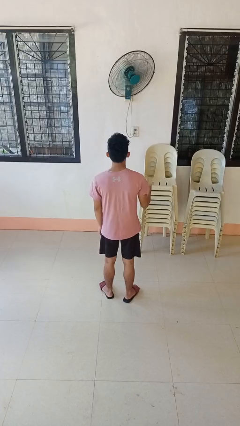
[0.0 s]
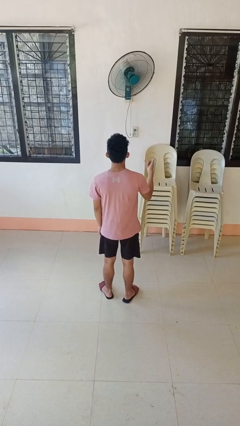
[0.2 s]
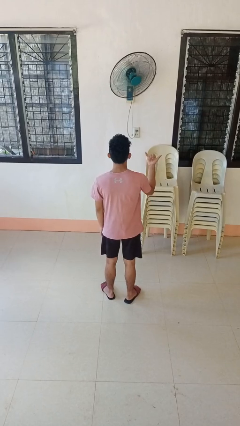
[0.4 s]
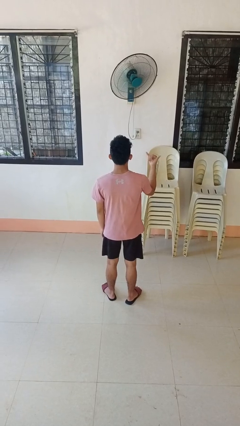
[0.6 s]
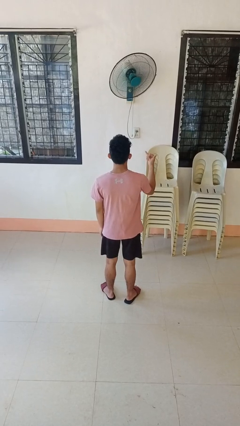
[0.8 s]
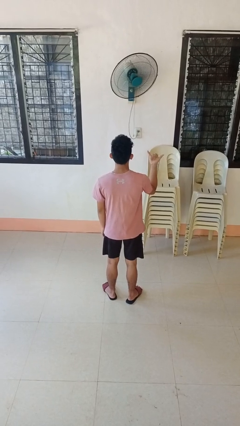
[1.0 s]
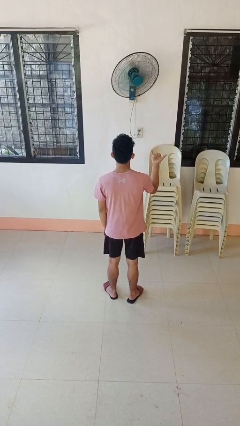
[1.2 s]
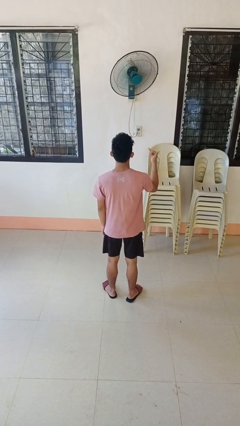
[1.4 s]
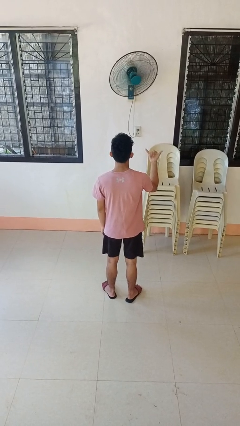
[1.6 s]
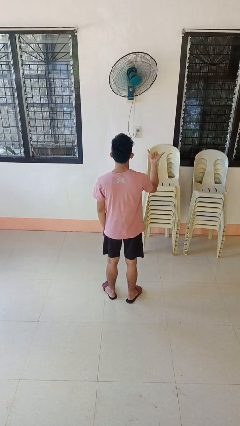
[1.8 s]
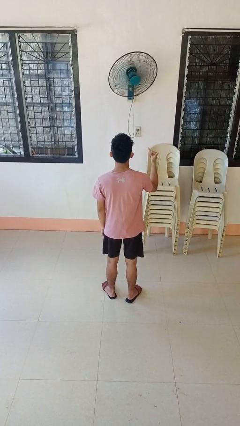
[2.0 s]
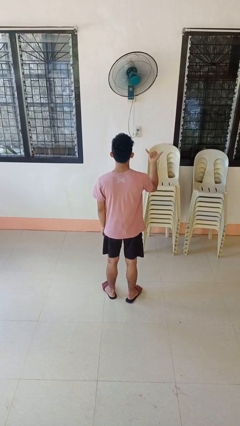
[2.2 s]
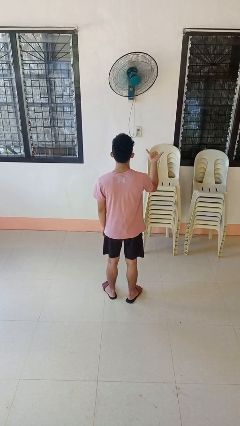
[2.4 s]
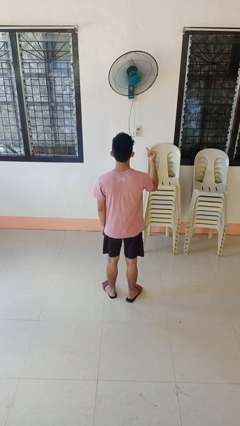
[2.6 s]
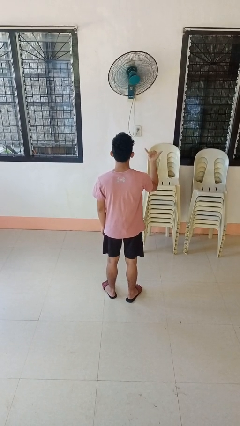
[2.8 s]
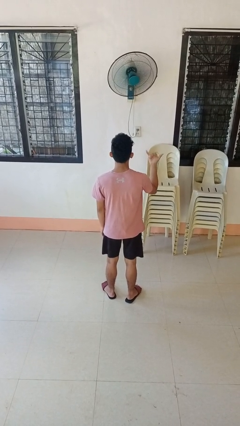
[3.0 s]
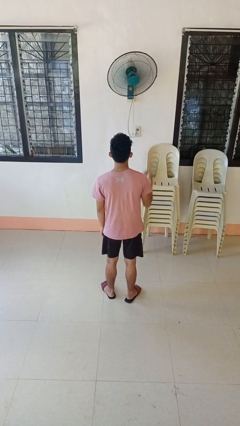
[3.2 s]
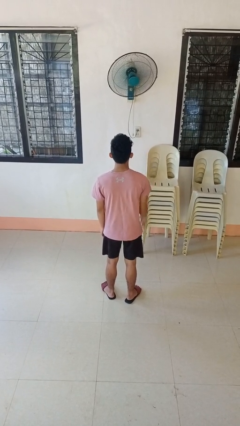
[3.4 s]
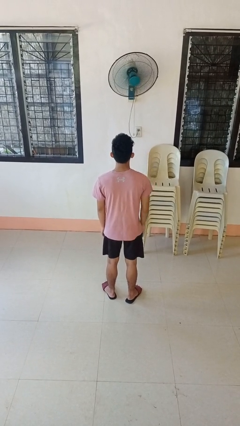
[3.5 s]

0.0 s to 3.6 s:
person gestures hang loose

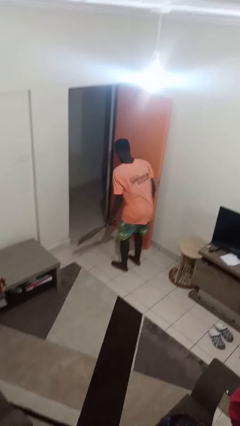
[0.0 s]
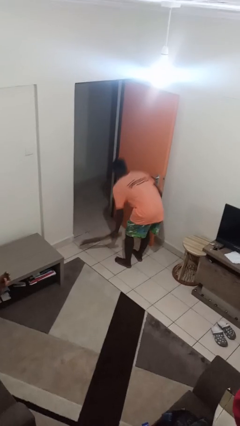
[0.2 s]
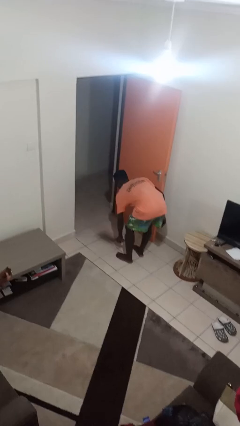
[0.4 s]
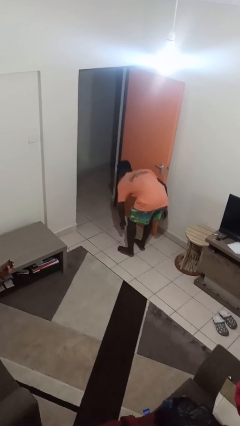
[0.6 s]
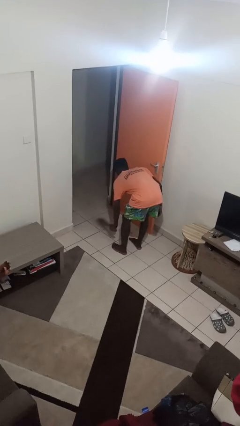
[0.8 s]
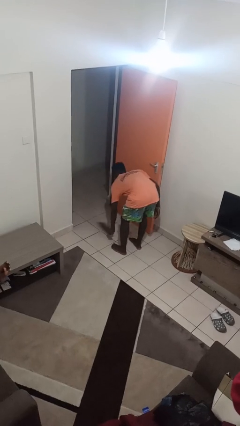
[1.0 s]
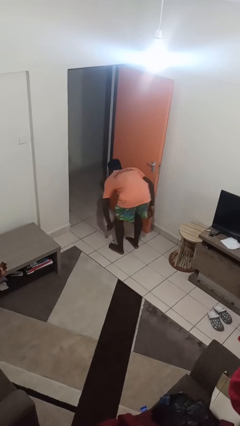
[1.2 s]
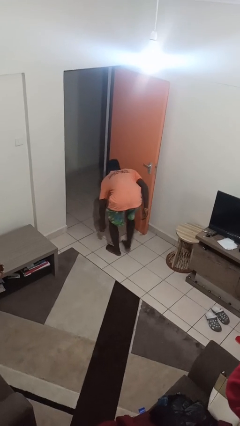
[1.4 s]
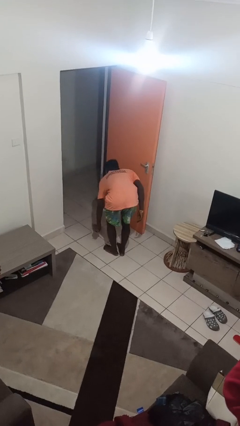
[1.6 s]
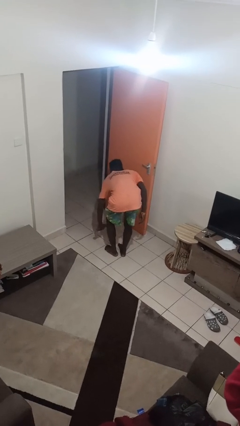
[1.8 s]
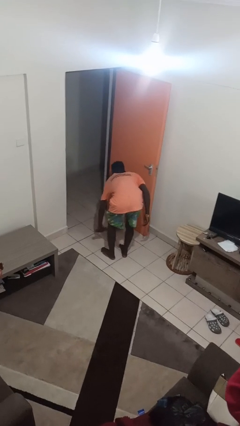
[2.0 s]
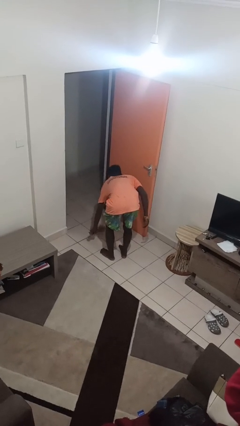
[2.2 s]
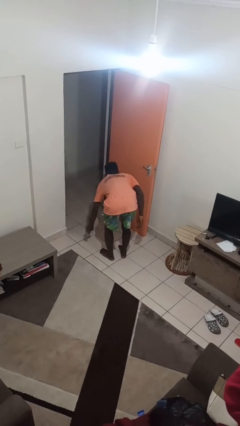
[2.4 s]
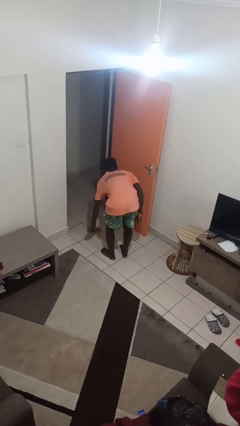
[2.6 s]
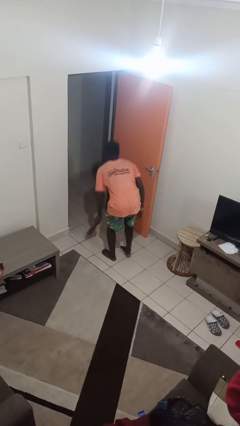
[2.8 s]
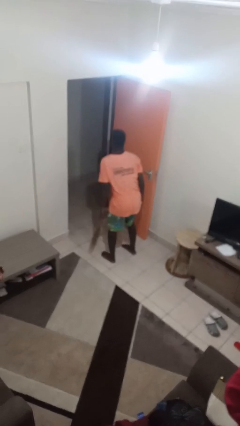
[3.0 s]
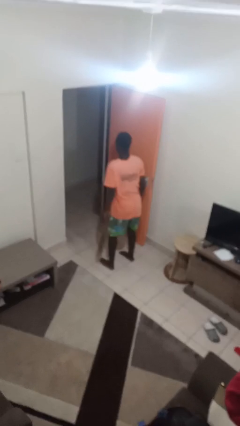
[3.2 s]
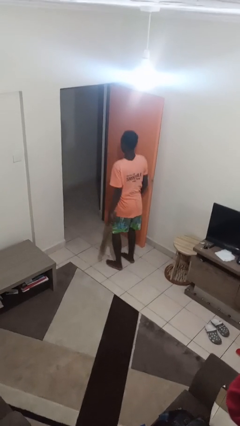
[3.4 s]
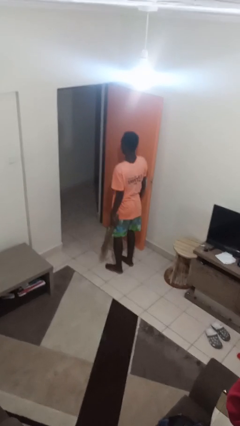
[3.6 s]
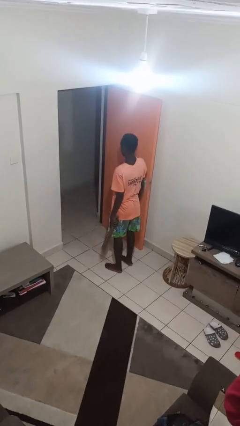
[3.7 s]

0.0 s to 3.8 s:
person sweeps floor

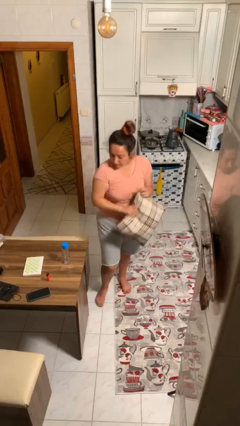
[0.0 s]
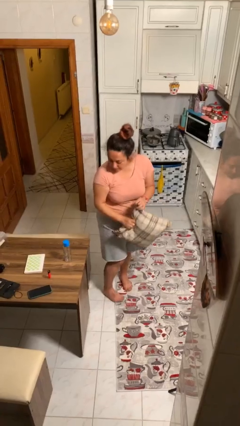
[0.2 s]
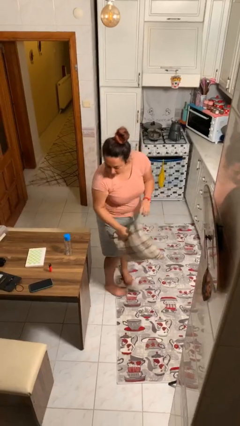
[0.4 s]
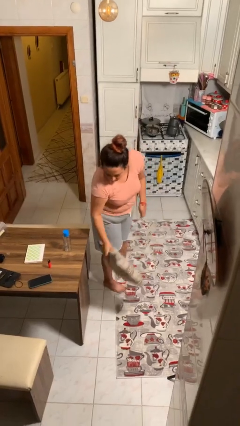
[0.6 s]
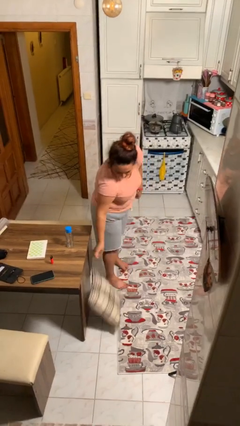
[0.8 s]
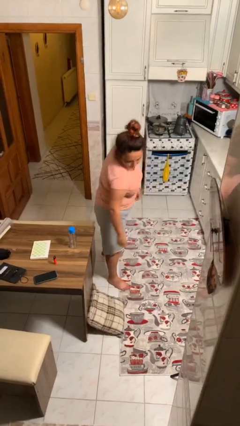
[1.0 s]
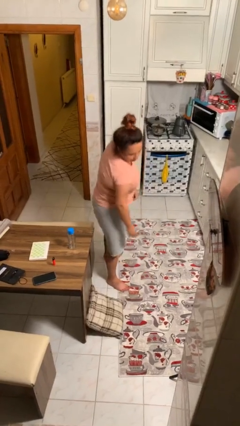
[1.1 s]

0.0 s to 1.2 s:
person puts down object on floor

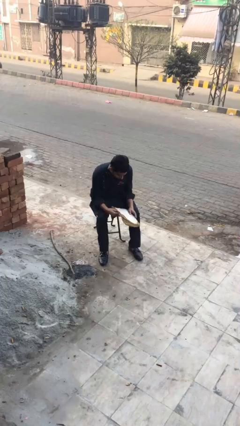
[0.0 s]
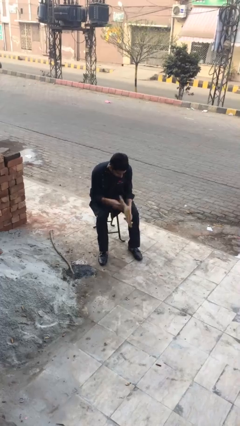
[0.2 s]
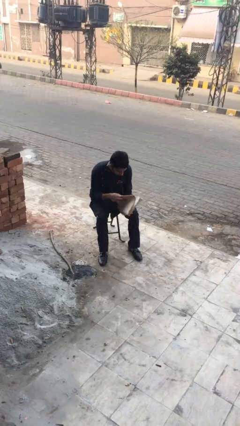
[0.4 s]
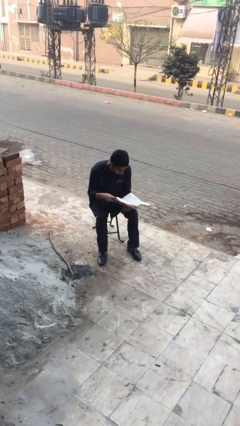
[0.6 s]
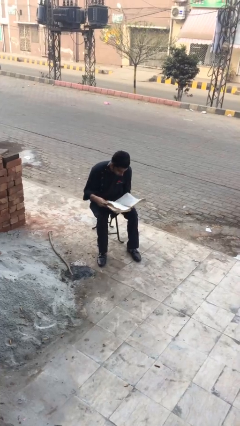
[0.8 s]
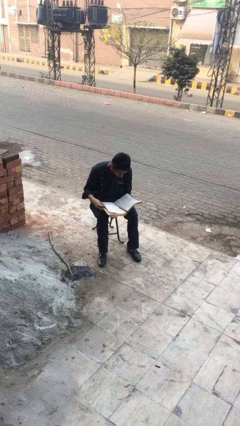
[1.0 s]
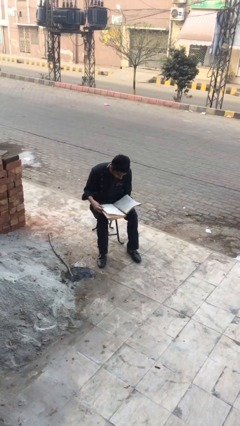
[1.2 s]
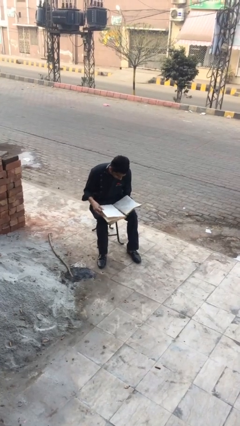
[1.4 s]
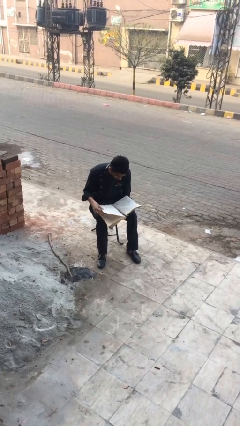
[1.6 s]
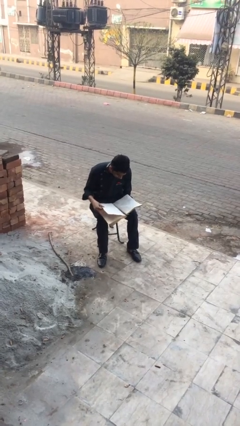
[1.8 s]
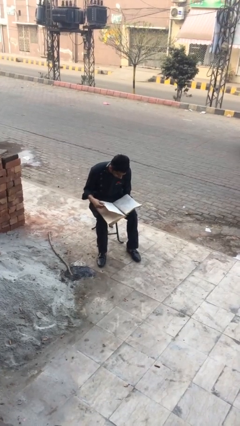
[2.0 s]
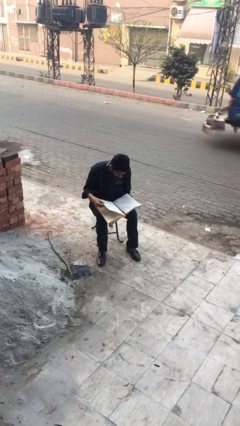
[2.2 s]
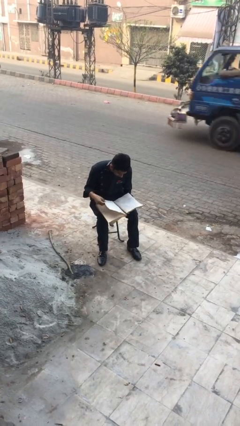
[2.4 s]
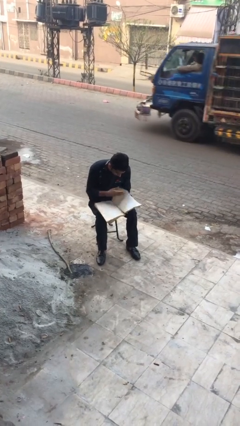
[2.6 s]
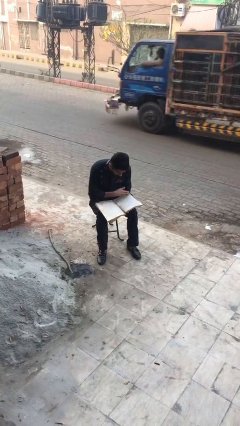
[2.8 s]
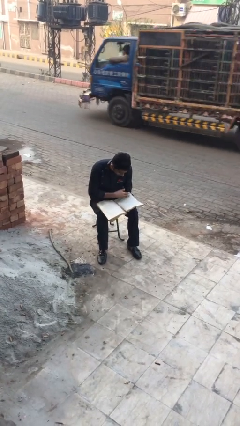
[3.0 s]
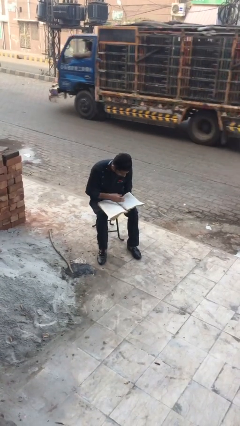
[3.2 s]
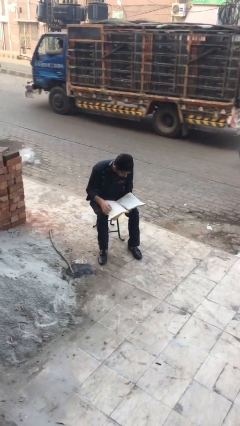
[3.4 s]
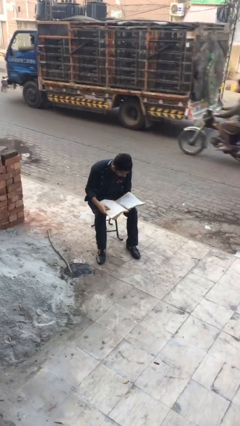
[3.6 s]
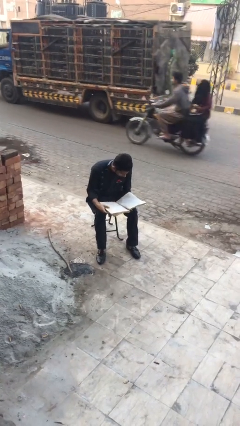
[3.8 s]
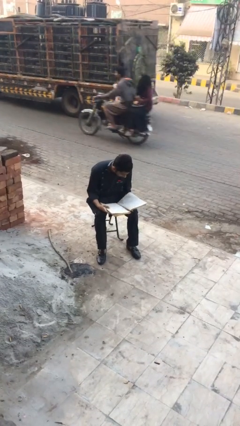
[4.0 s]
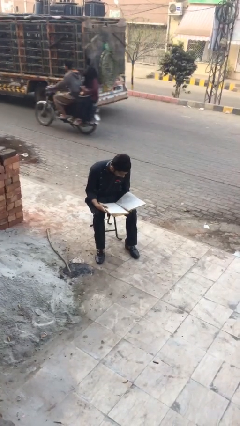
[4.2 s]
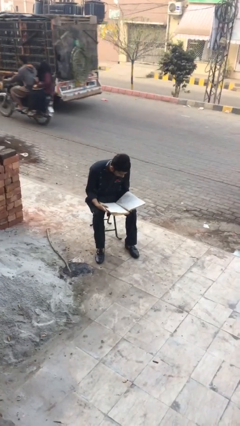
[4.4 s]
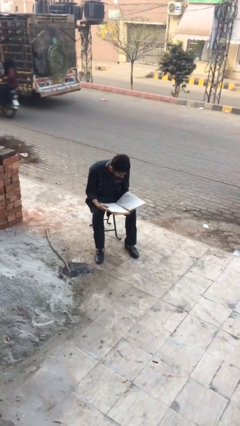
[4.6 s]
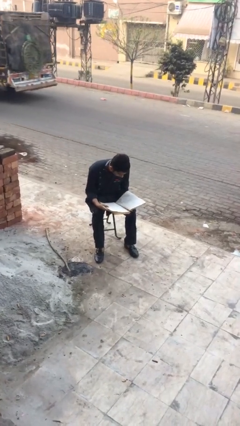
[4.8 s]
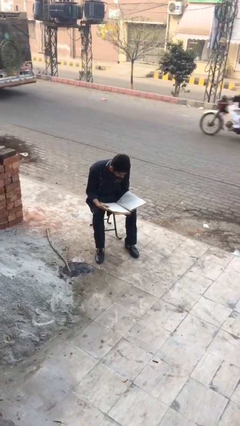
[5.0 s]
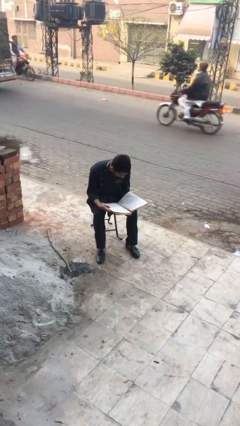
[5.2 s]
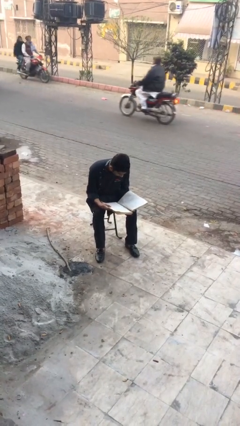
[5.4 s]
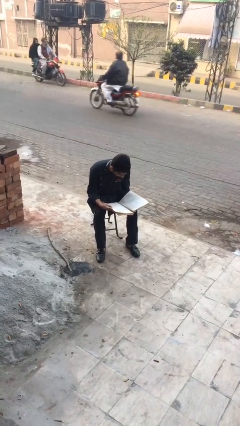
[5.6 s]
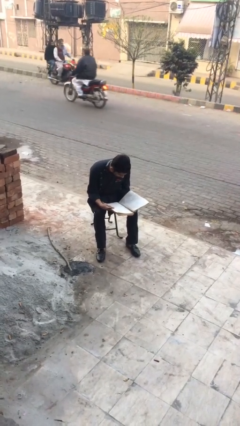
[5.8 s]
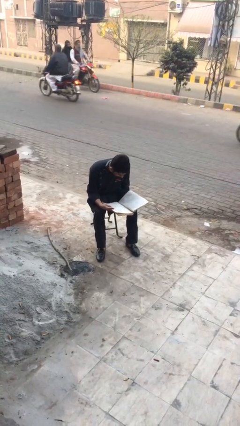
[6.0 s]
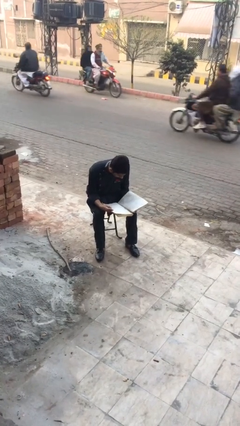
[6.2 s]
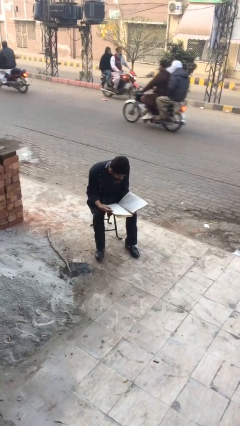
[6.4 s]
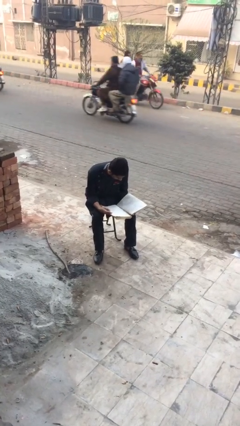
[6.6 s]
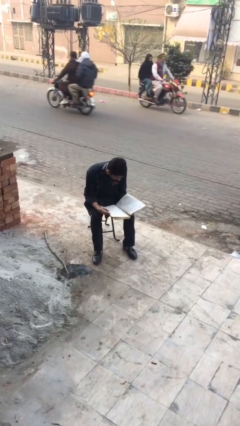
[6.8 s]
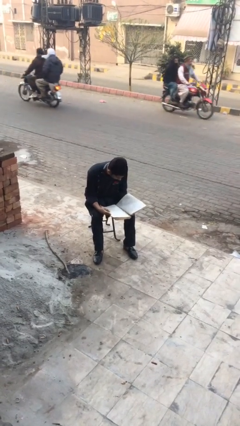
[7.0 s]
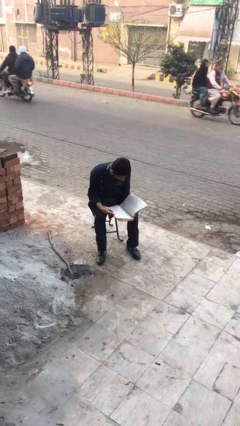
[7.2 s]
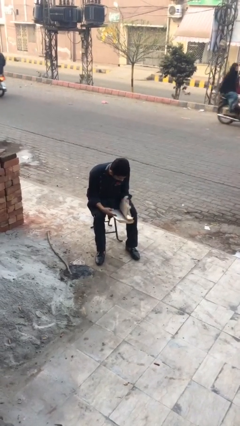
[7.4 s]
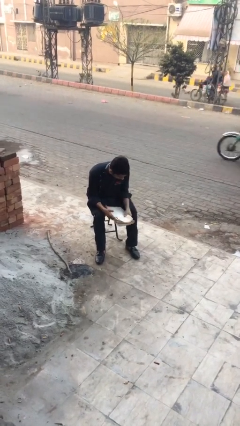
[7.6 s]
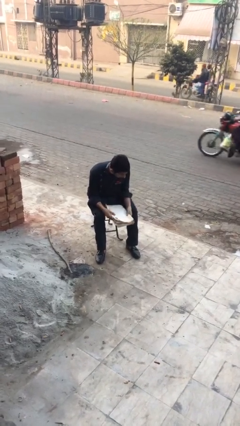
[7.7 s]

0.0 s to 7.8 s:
person reads document

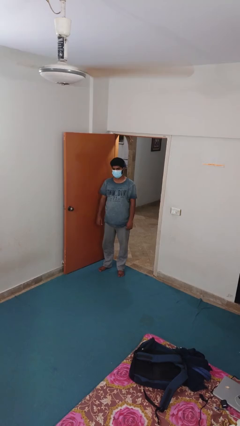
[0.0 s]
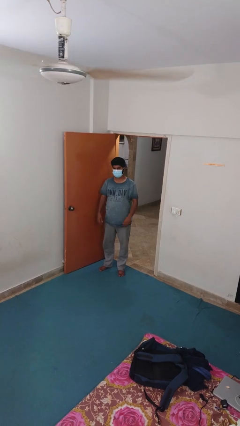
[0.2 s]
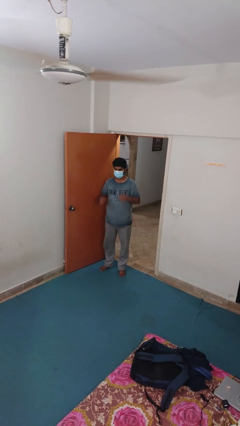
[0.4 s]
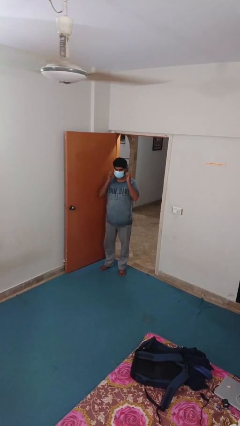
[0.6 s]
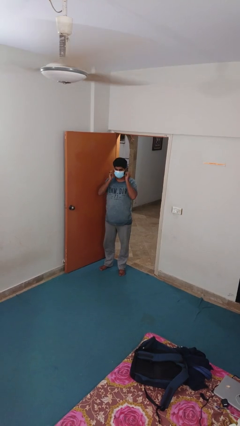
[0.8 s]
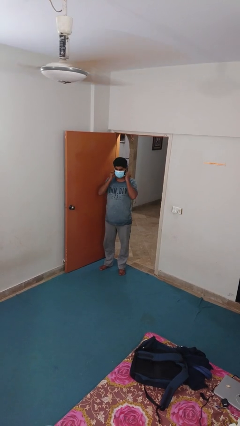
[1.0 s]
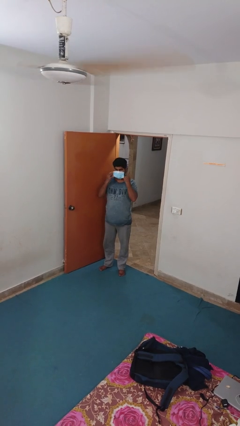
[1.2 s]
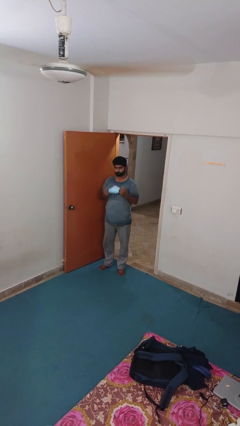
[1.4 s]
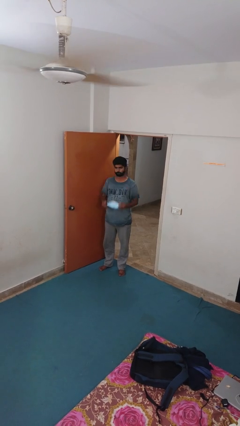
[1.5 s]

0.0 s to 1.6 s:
person takes off facemask
